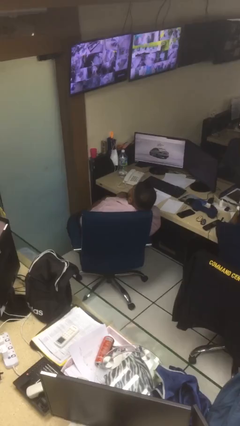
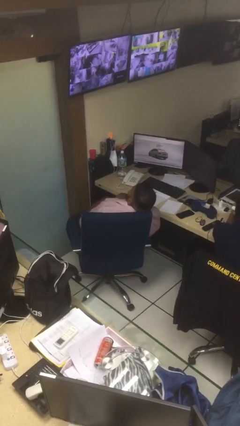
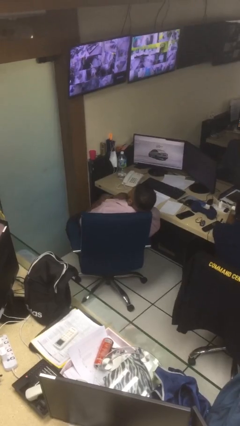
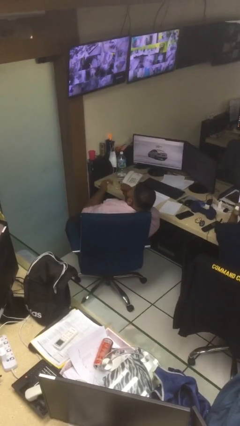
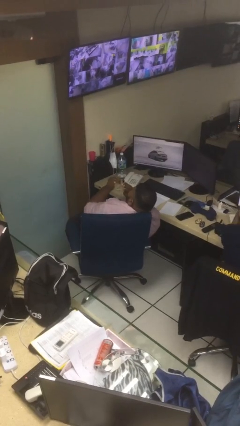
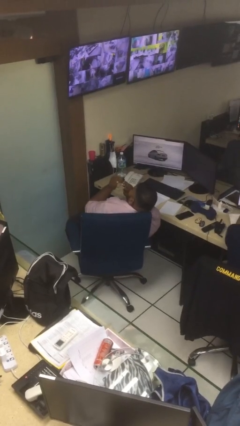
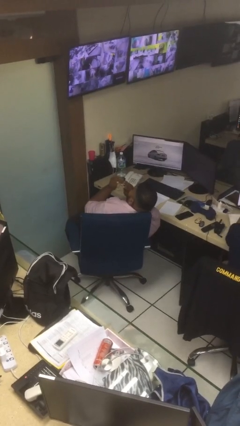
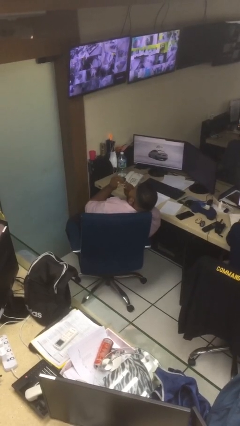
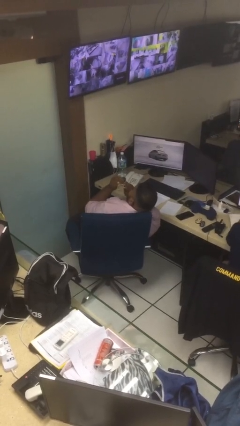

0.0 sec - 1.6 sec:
person files fingernails

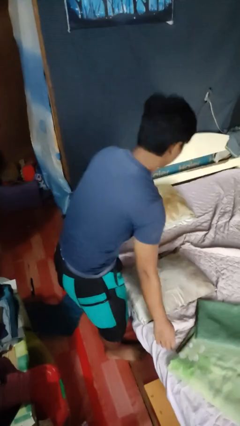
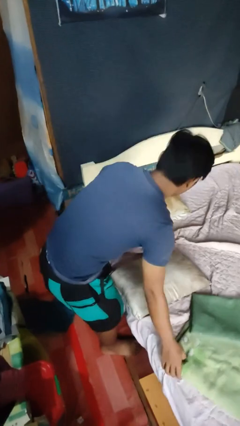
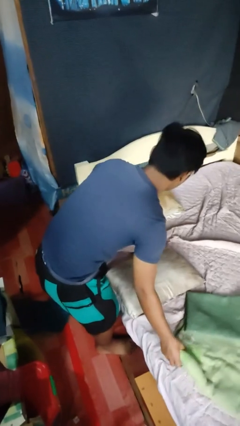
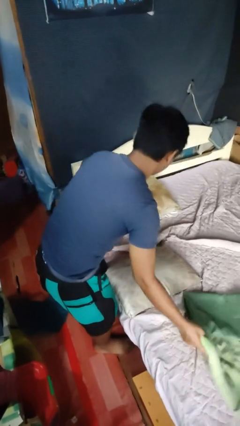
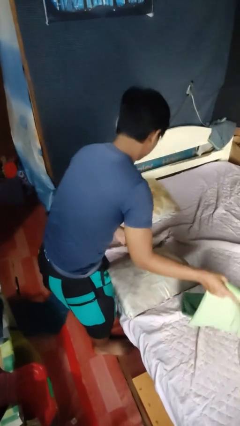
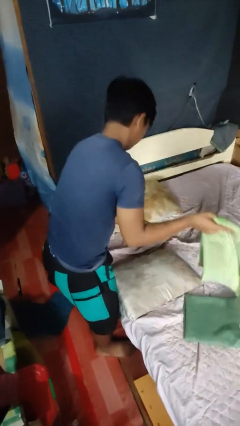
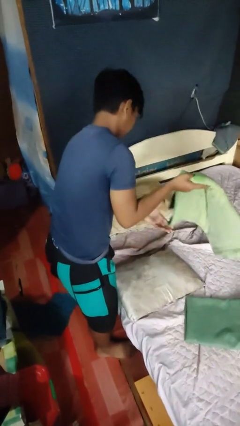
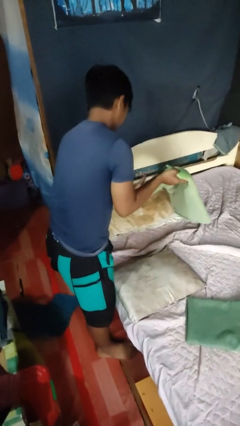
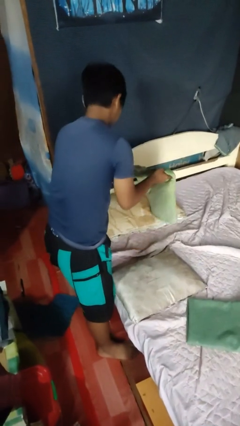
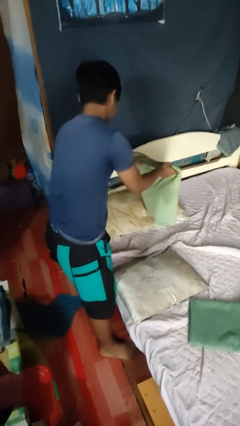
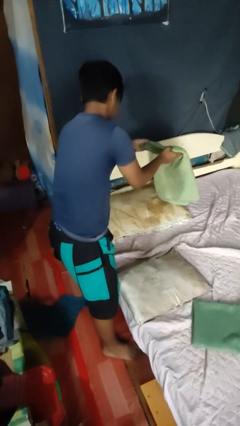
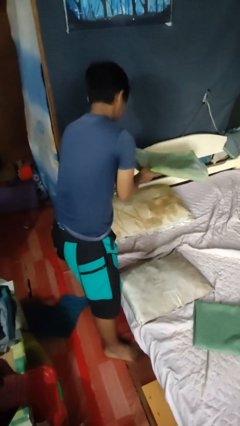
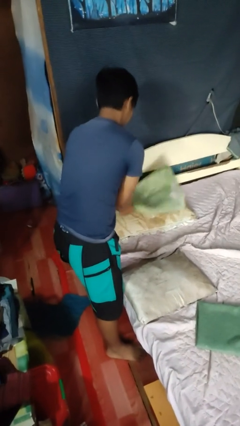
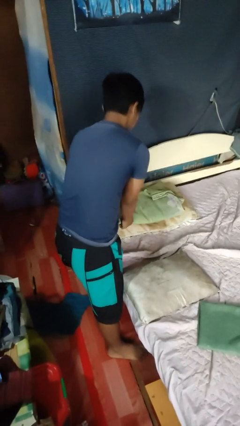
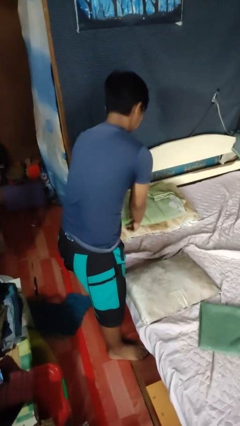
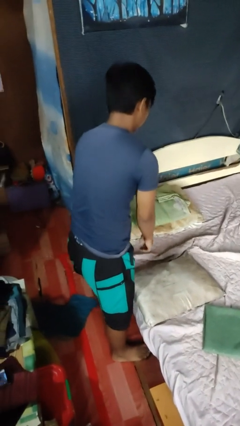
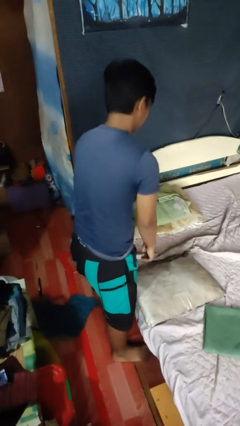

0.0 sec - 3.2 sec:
person makes bed

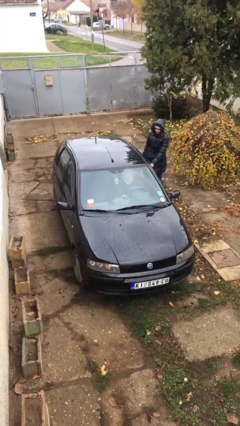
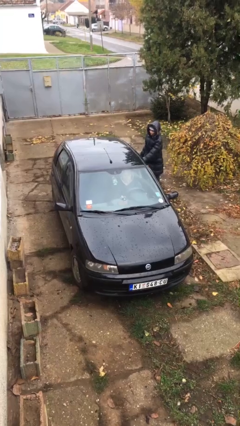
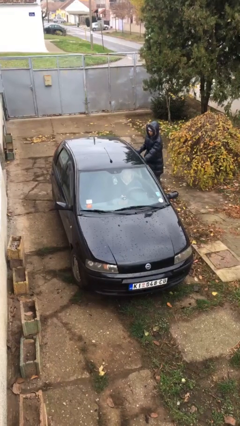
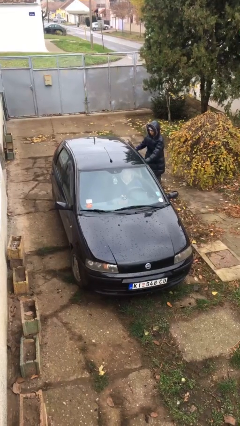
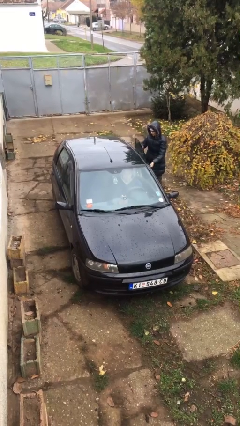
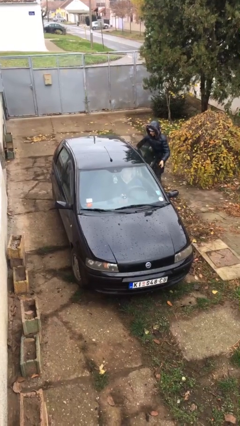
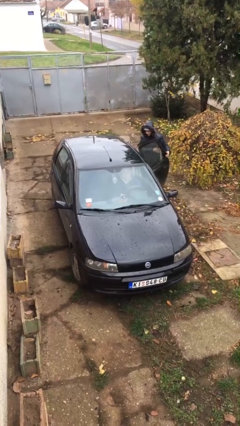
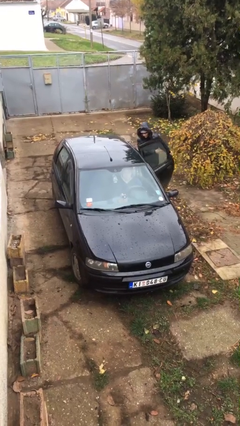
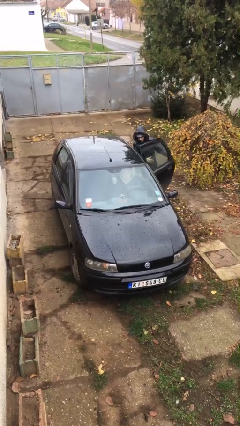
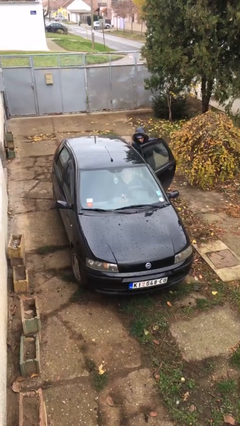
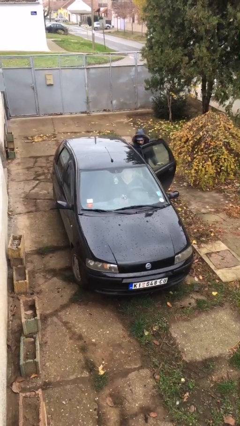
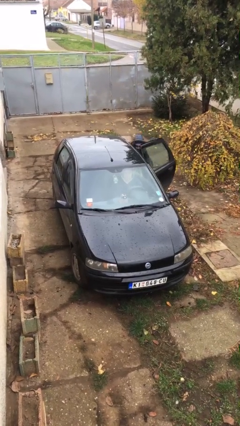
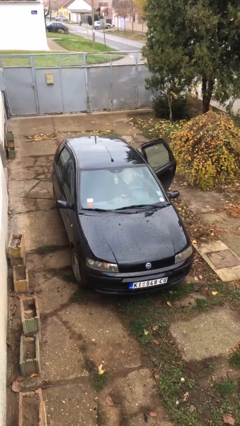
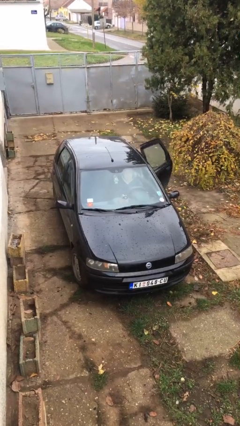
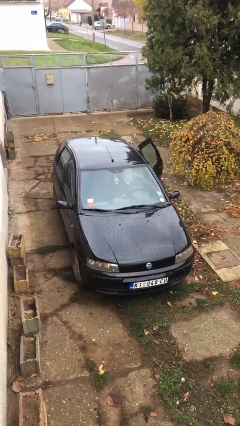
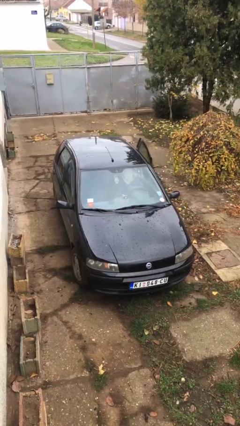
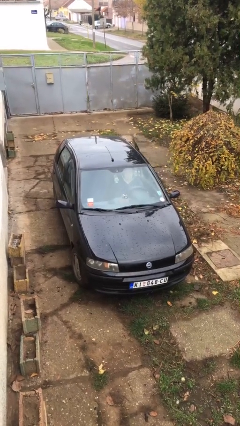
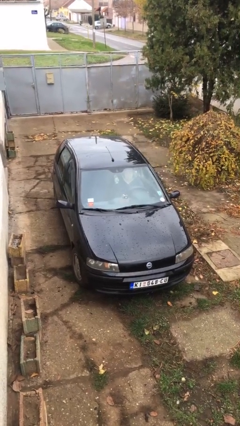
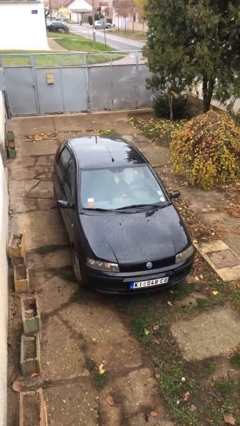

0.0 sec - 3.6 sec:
car picks up person

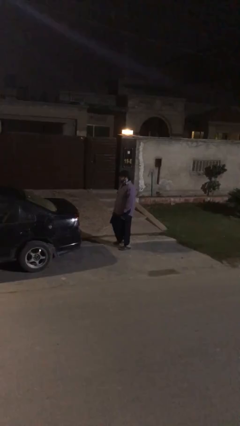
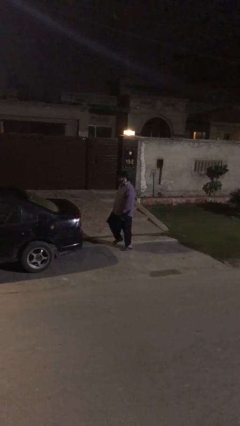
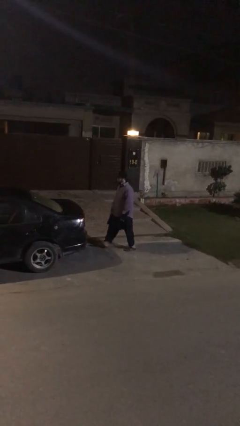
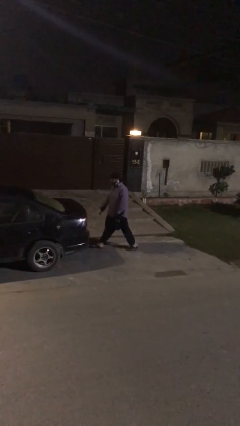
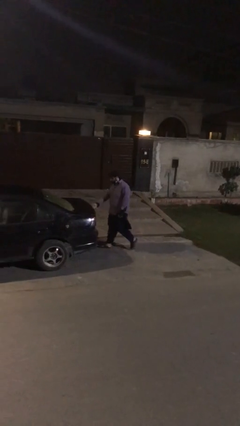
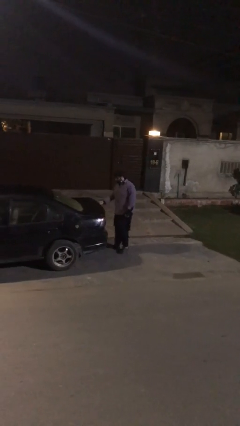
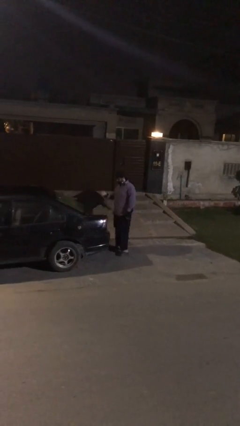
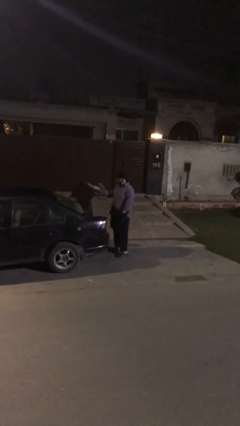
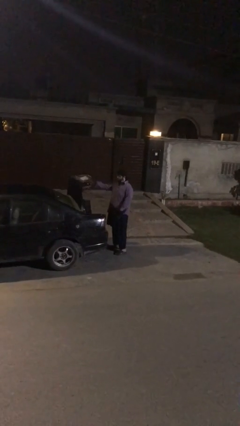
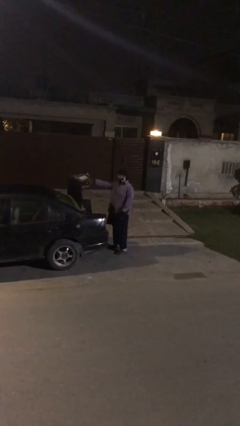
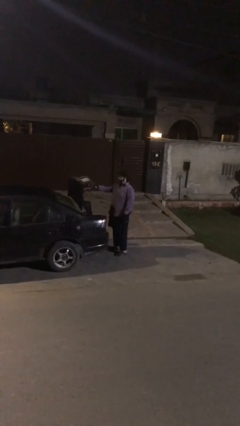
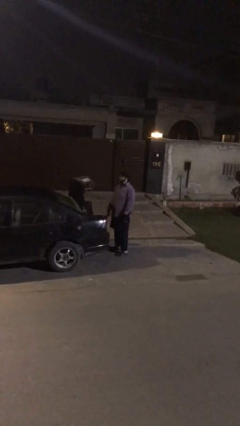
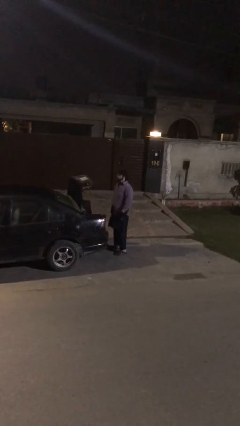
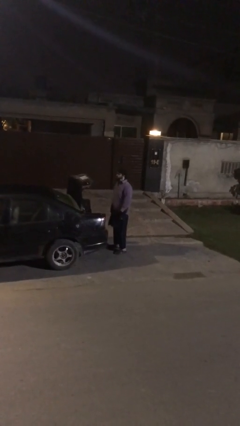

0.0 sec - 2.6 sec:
person opens car trunk

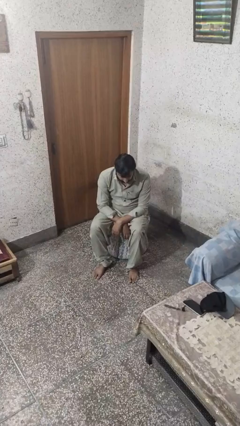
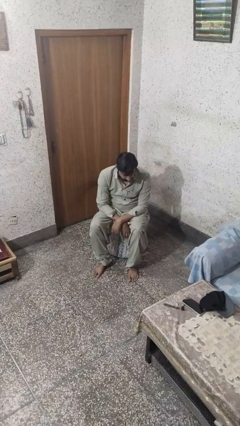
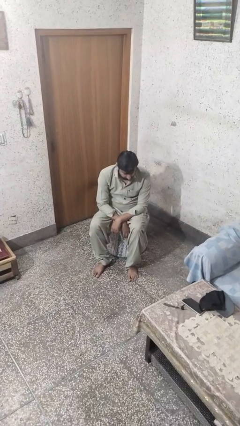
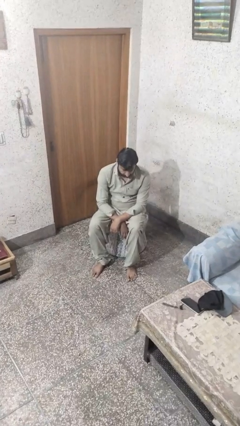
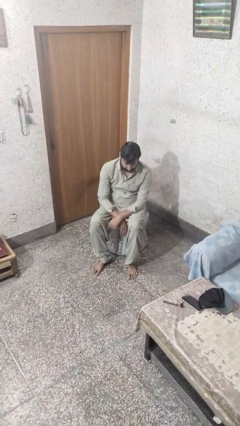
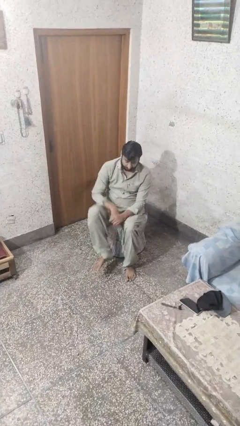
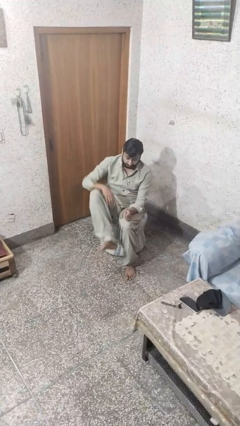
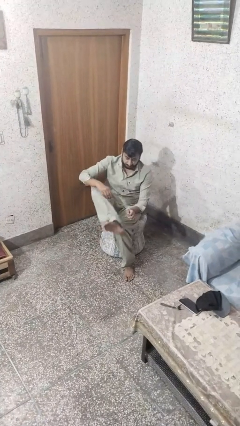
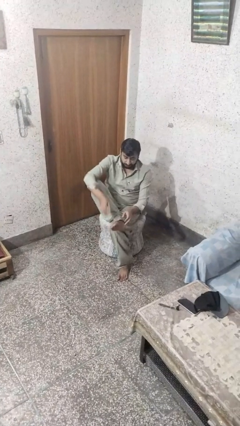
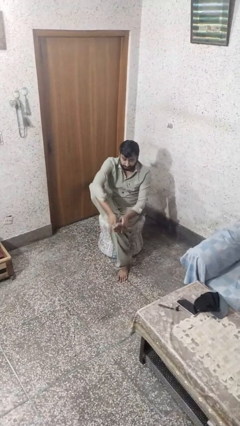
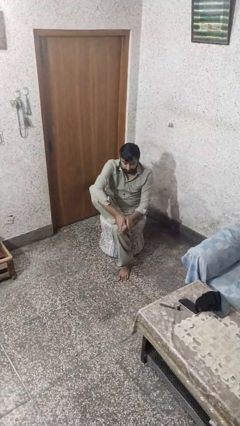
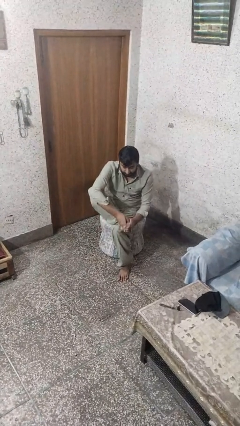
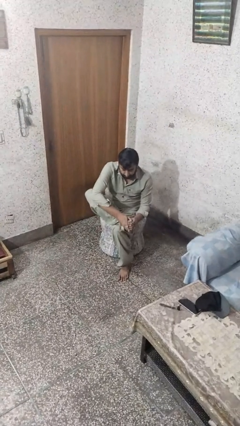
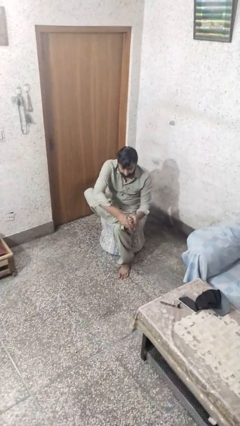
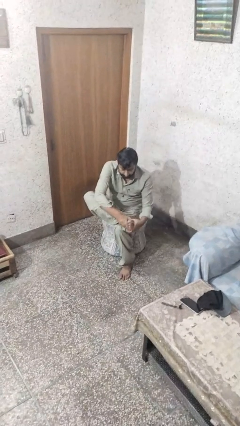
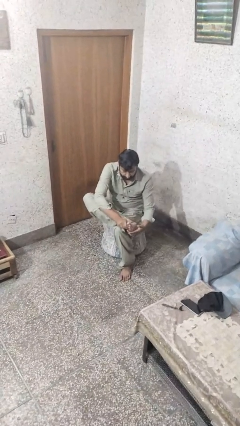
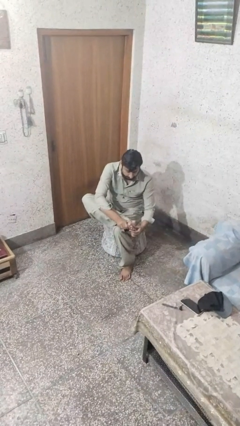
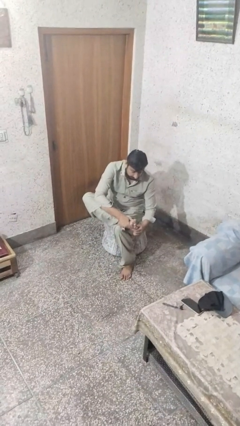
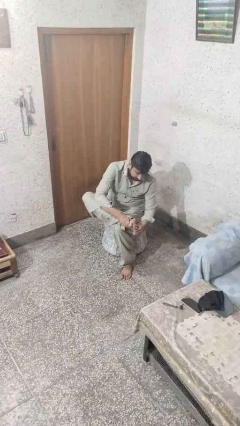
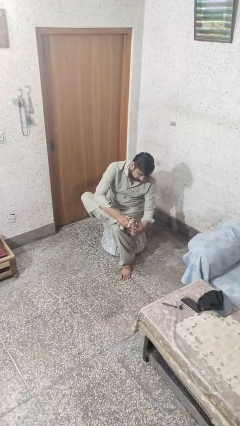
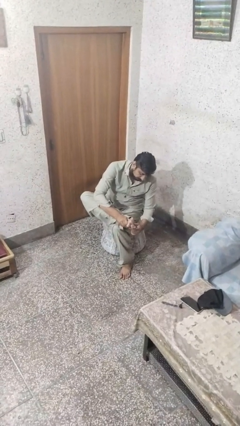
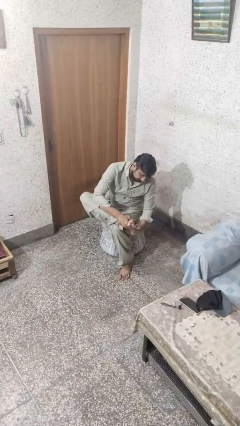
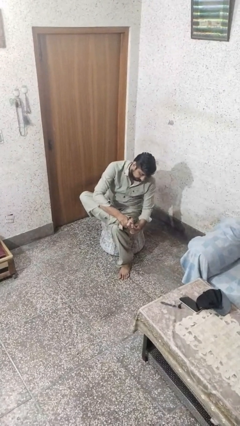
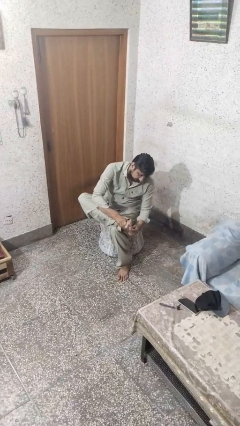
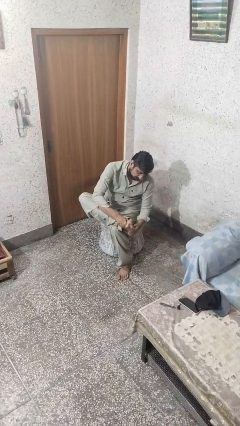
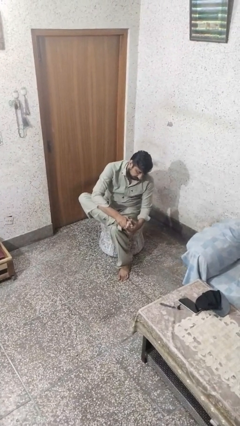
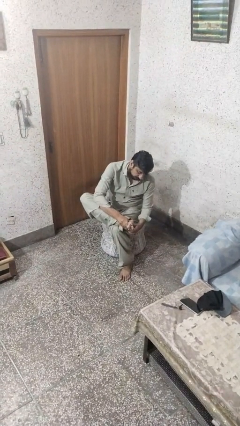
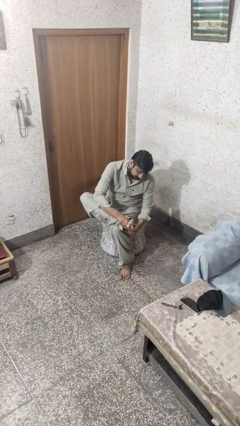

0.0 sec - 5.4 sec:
person rubs foot

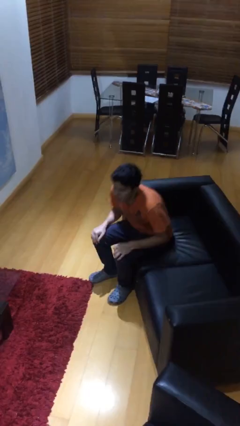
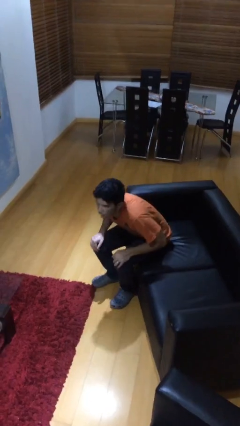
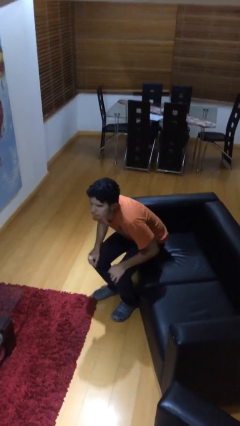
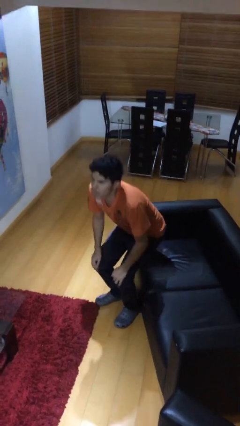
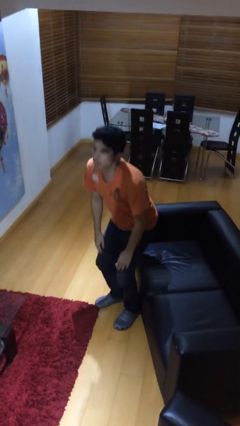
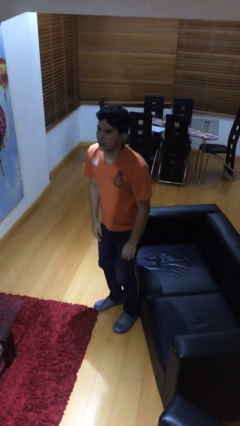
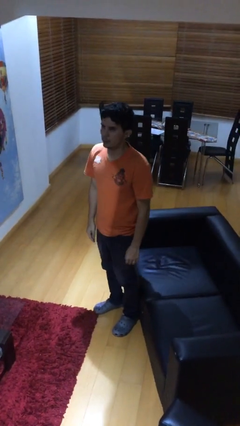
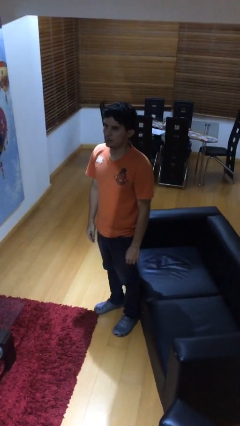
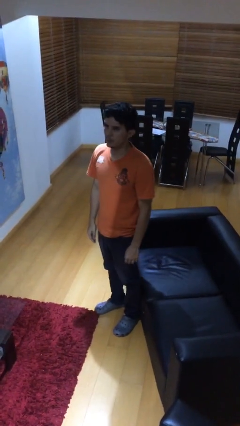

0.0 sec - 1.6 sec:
person stands up
